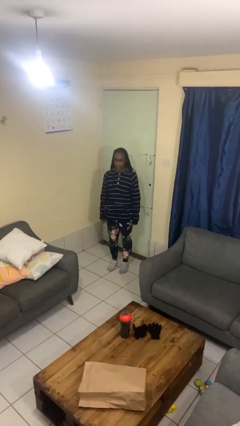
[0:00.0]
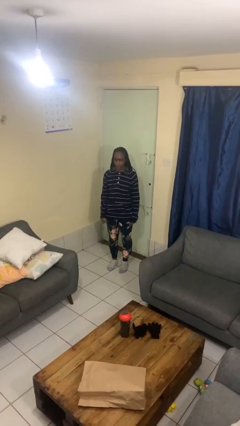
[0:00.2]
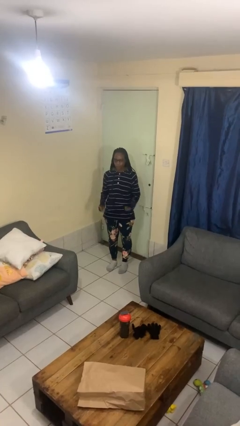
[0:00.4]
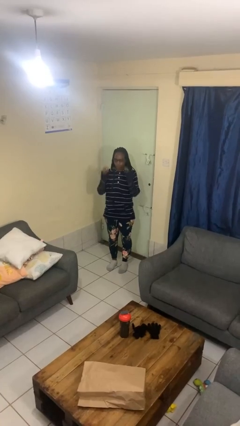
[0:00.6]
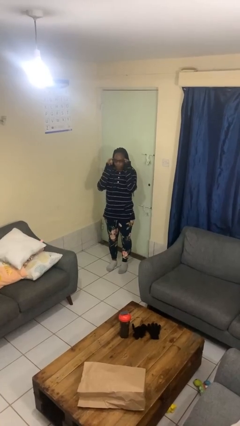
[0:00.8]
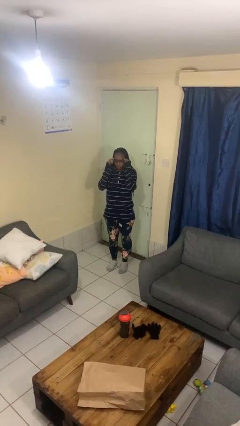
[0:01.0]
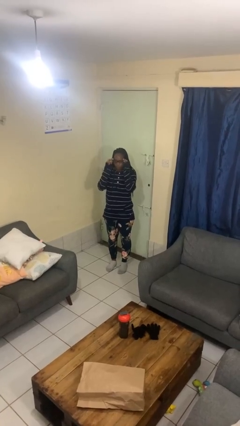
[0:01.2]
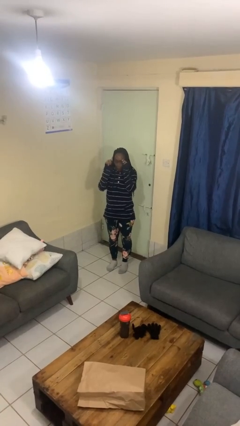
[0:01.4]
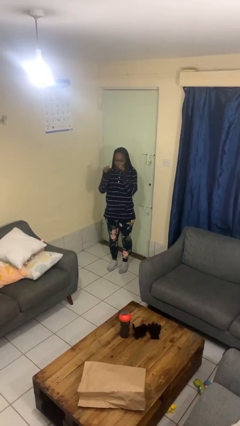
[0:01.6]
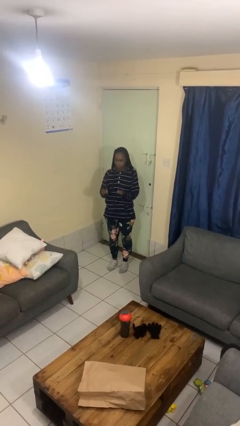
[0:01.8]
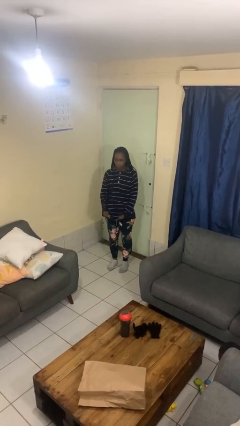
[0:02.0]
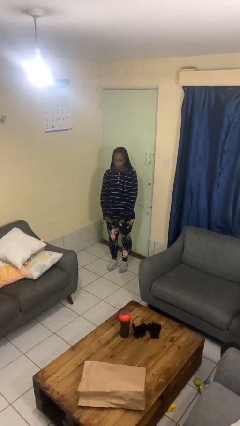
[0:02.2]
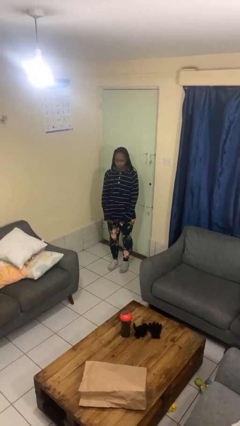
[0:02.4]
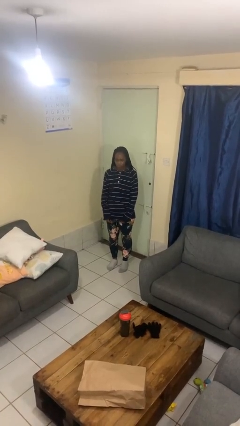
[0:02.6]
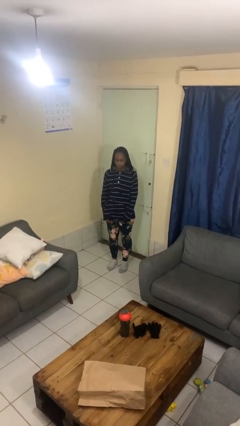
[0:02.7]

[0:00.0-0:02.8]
person takes off glasses

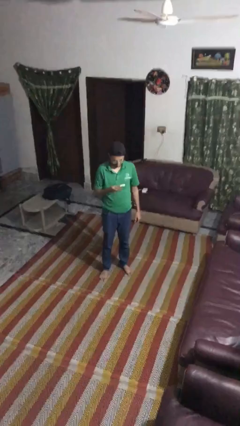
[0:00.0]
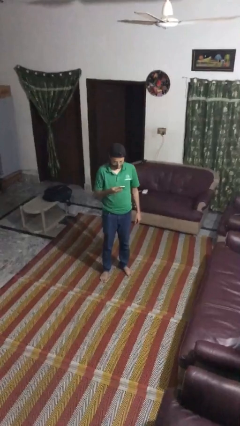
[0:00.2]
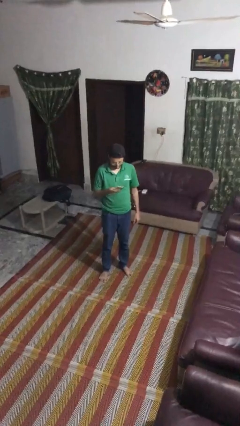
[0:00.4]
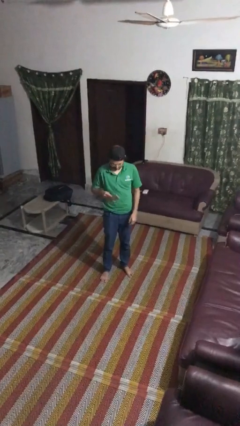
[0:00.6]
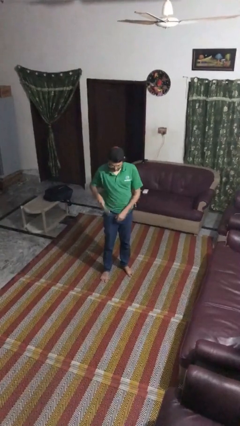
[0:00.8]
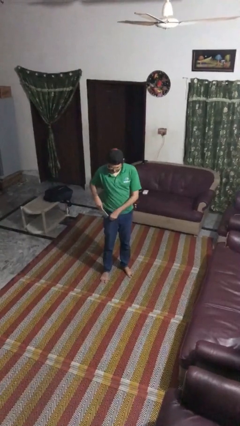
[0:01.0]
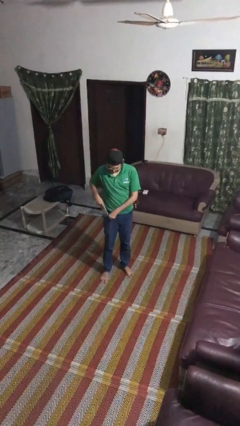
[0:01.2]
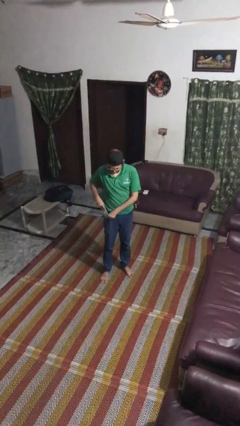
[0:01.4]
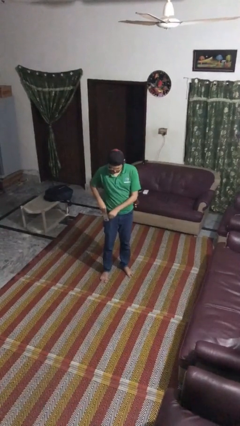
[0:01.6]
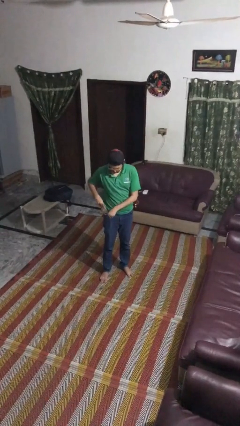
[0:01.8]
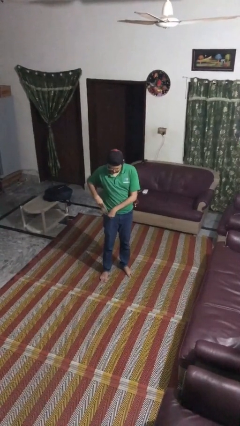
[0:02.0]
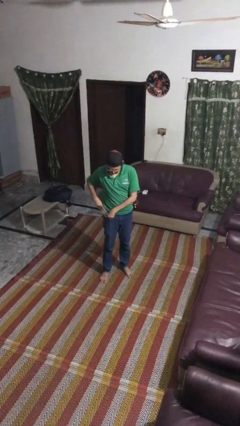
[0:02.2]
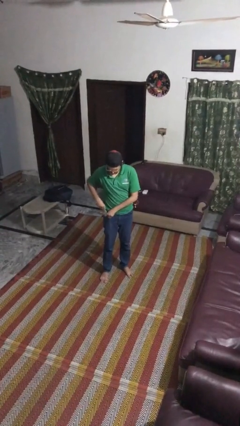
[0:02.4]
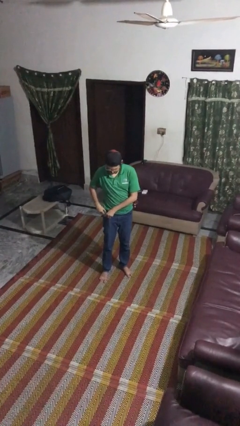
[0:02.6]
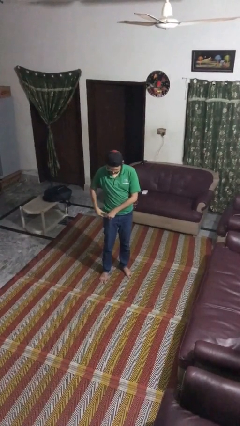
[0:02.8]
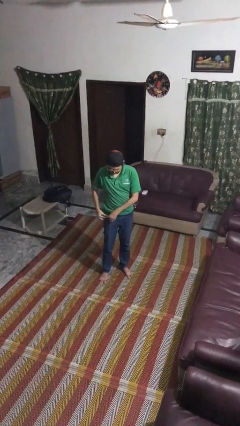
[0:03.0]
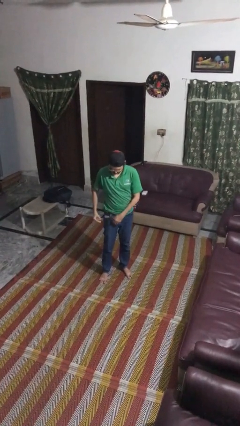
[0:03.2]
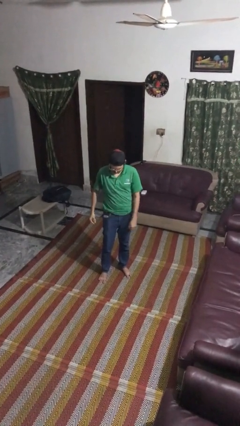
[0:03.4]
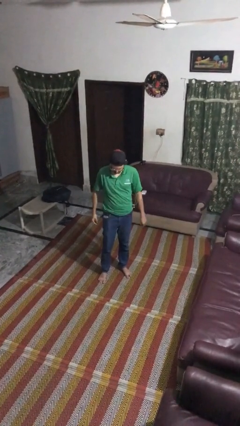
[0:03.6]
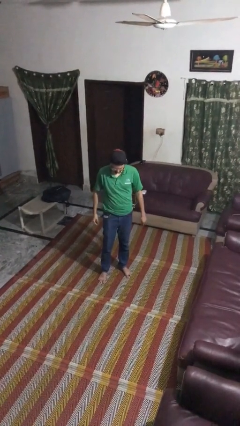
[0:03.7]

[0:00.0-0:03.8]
person puts phone into pocket

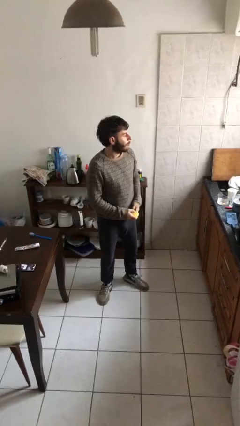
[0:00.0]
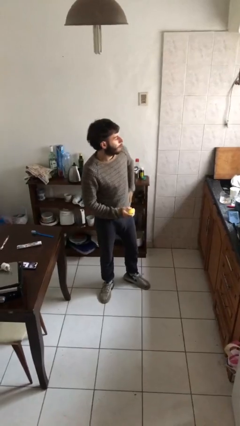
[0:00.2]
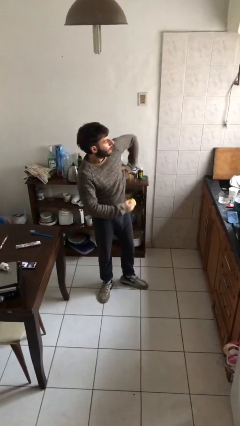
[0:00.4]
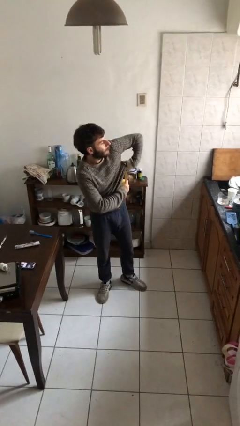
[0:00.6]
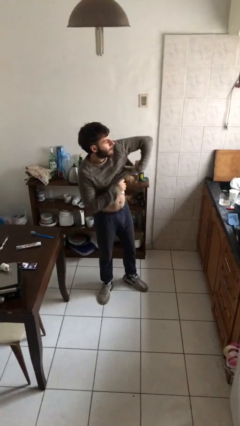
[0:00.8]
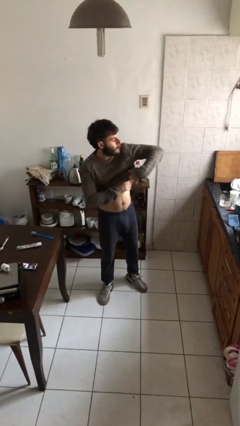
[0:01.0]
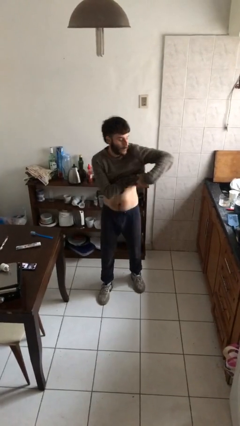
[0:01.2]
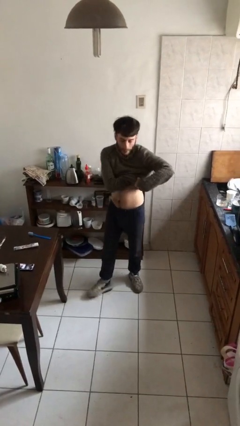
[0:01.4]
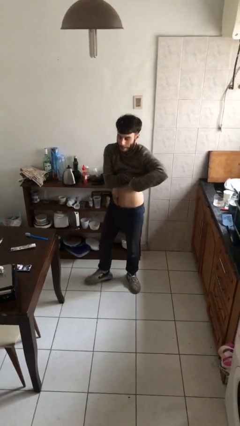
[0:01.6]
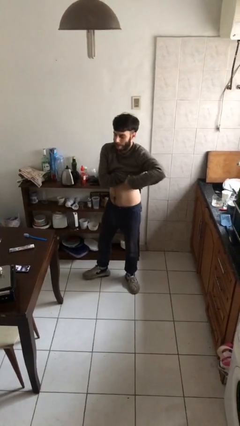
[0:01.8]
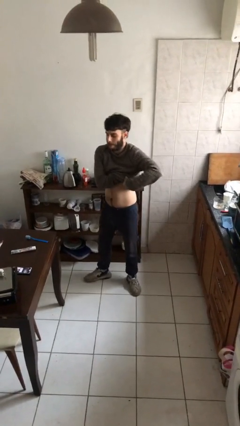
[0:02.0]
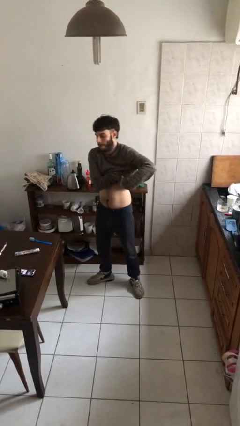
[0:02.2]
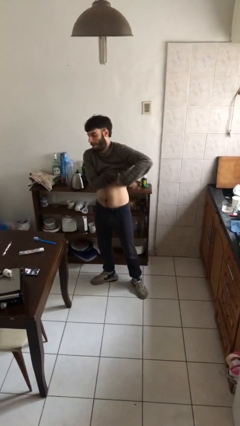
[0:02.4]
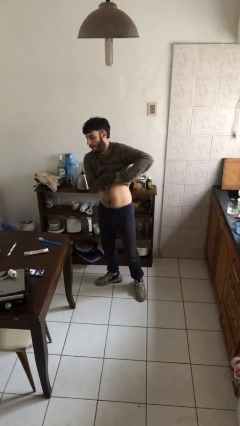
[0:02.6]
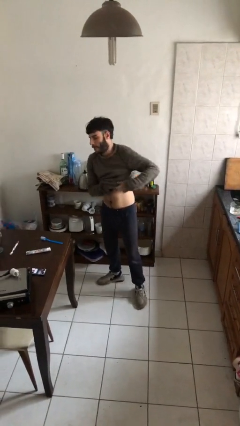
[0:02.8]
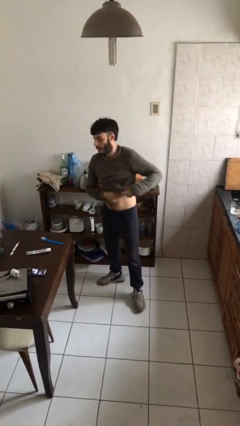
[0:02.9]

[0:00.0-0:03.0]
person applies deodorant

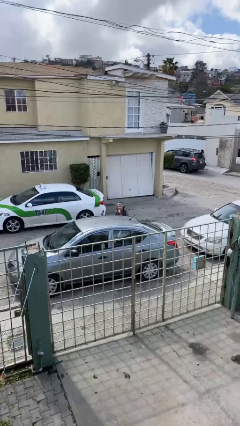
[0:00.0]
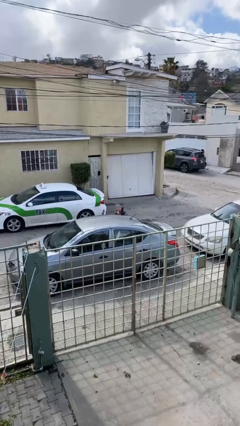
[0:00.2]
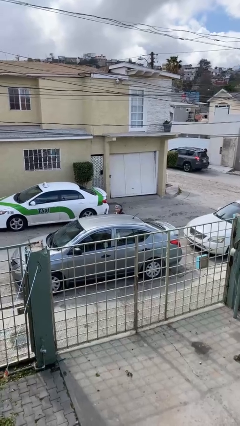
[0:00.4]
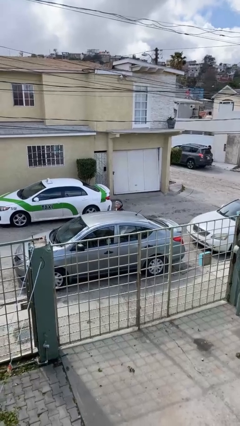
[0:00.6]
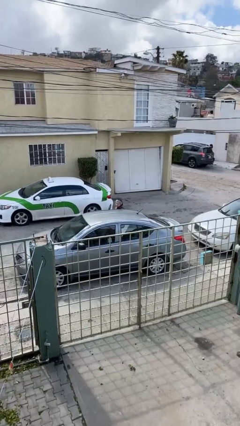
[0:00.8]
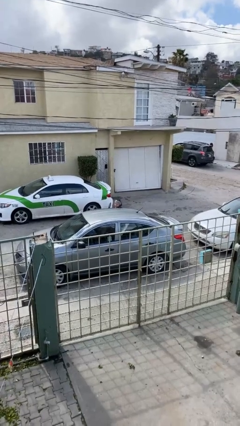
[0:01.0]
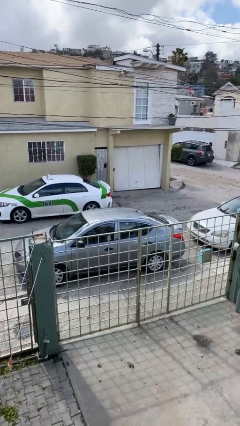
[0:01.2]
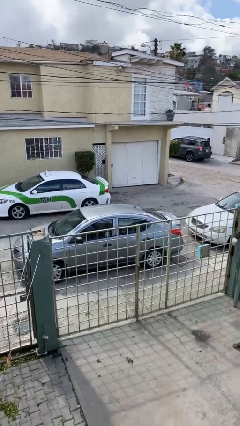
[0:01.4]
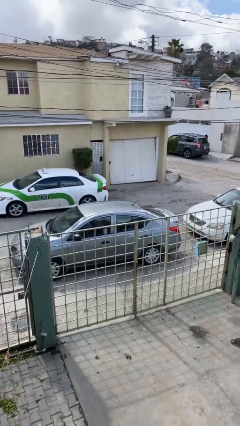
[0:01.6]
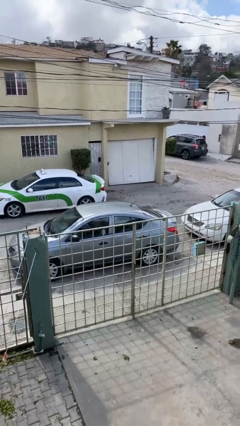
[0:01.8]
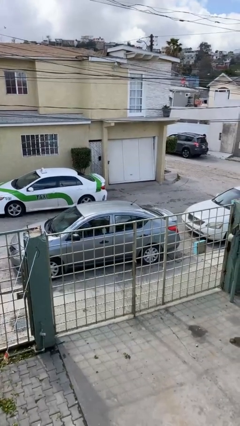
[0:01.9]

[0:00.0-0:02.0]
person enters car

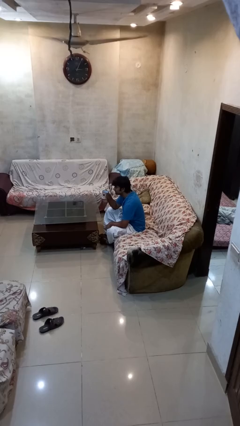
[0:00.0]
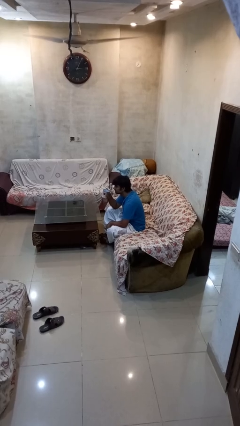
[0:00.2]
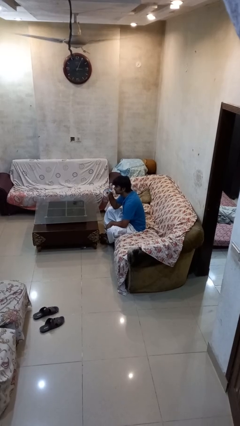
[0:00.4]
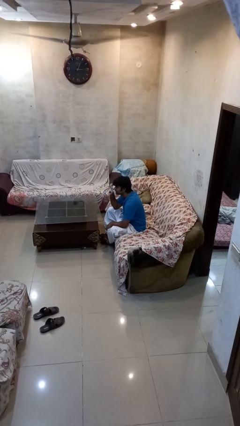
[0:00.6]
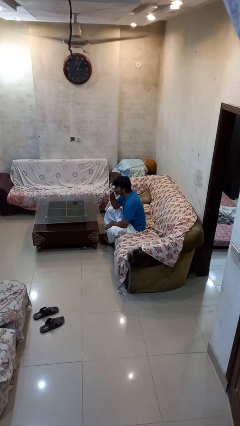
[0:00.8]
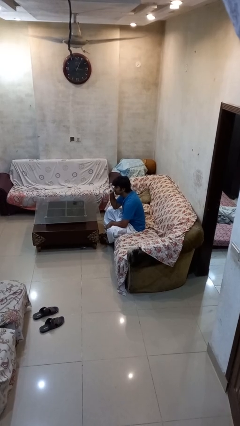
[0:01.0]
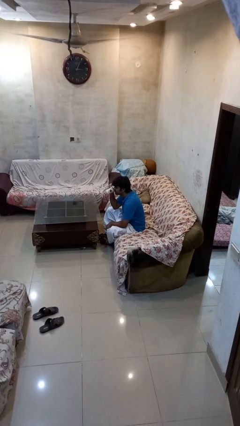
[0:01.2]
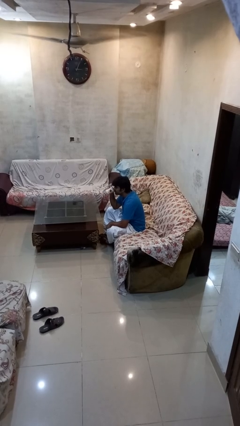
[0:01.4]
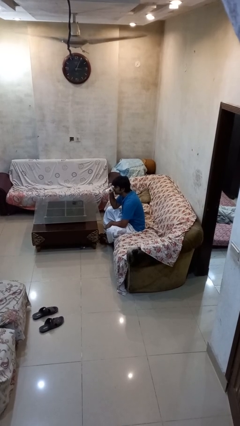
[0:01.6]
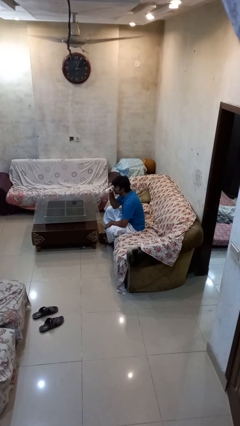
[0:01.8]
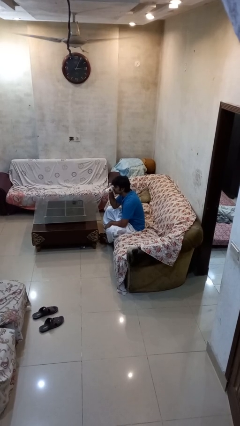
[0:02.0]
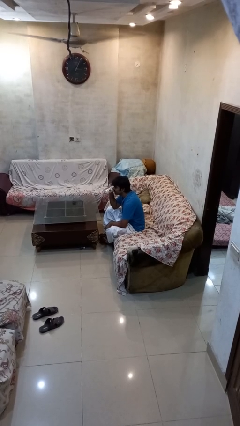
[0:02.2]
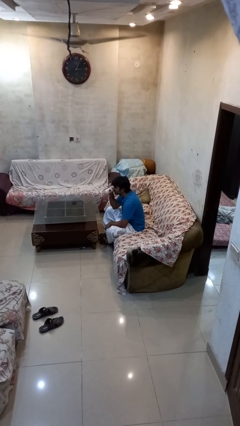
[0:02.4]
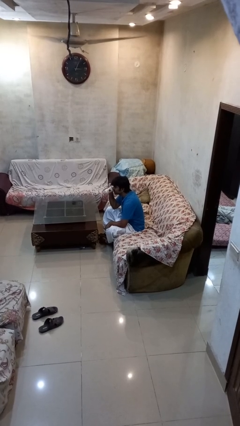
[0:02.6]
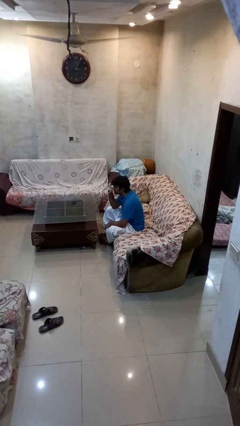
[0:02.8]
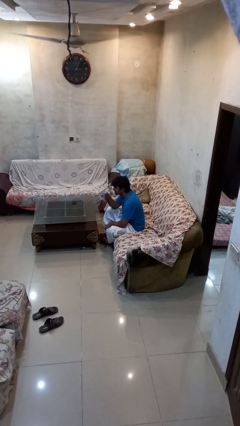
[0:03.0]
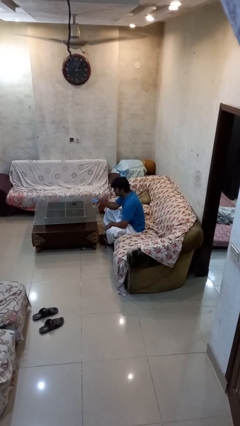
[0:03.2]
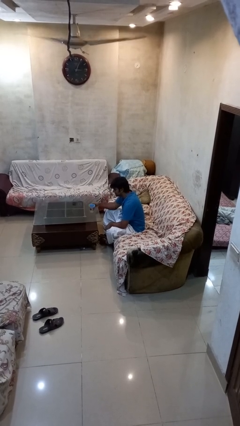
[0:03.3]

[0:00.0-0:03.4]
person drinks from mug

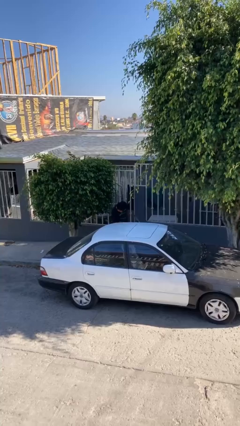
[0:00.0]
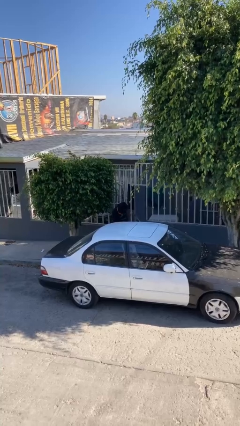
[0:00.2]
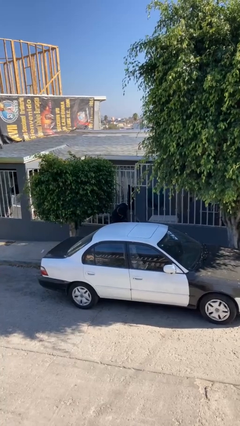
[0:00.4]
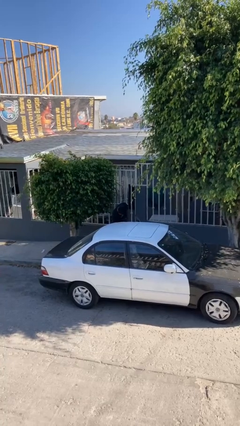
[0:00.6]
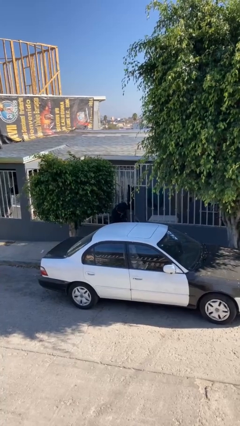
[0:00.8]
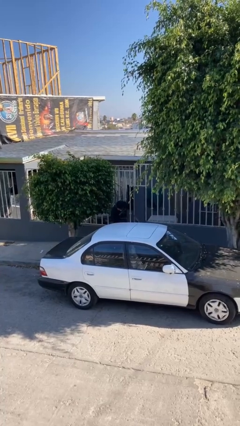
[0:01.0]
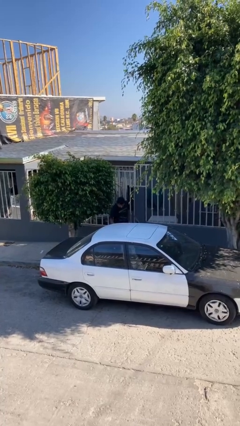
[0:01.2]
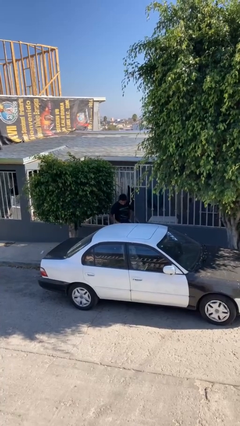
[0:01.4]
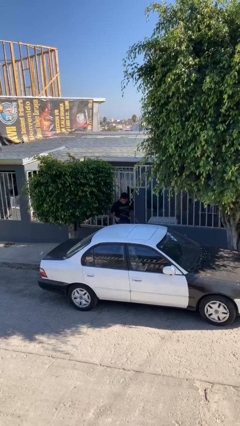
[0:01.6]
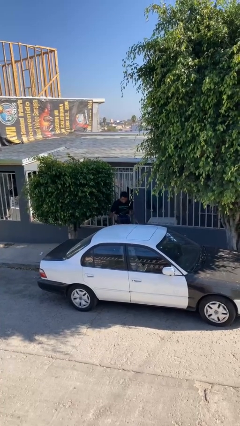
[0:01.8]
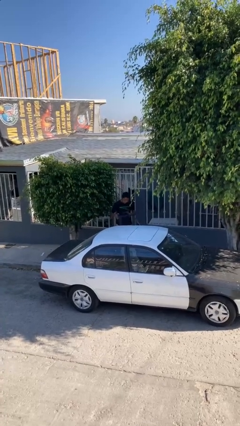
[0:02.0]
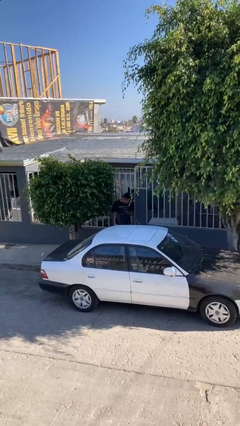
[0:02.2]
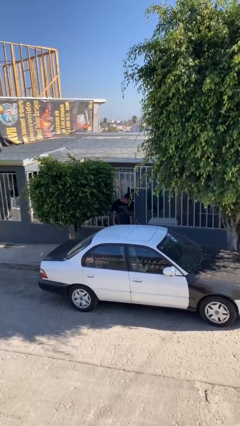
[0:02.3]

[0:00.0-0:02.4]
person unloads car

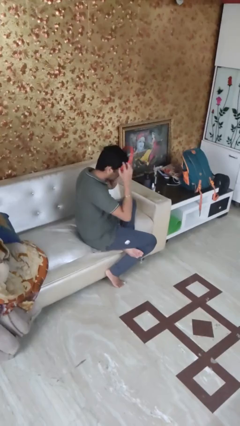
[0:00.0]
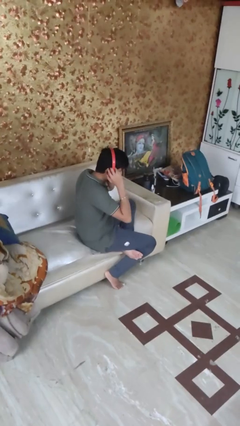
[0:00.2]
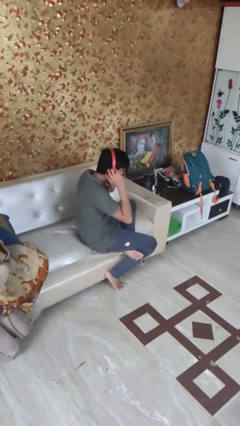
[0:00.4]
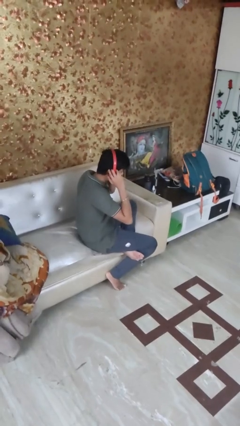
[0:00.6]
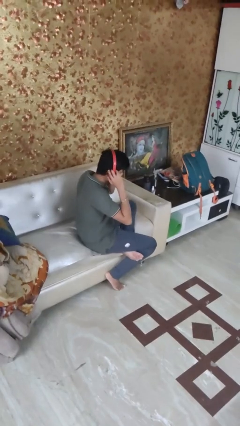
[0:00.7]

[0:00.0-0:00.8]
person puts on headphones
